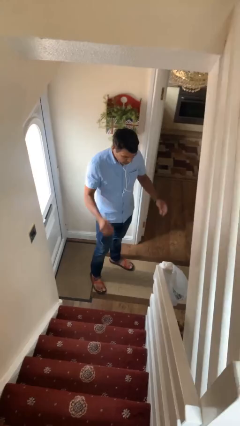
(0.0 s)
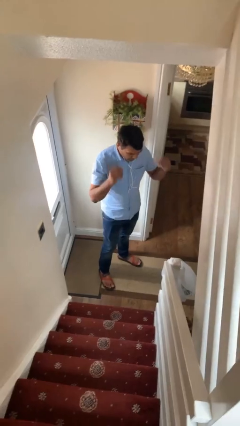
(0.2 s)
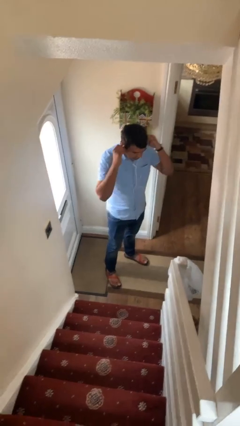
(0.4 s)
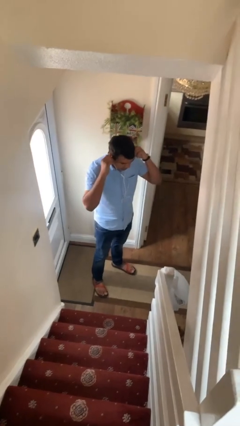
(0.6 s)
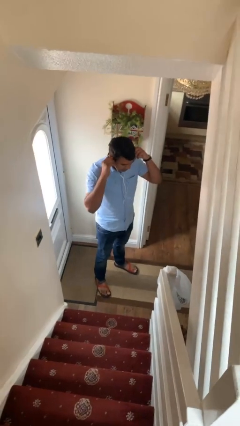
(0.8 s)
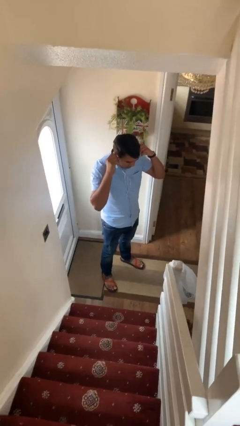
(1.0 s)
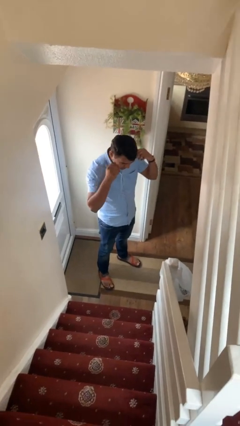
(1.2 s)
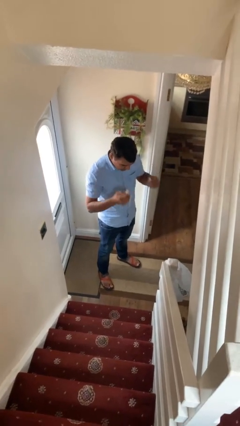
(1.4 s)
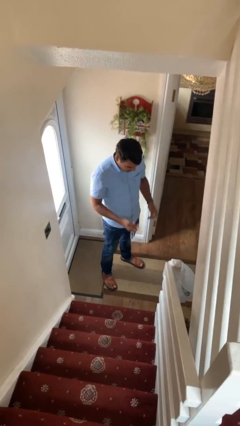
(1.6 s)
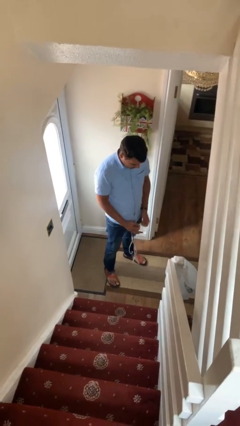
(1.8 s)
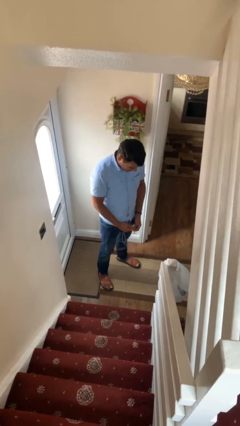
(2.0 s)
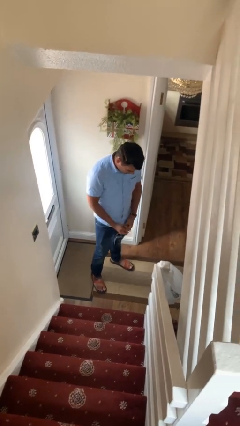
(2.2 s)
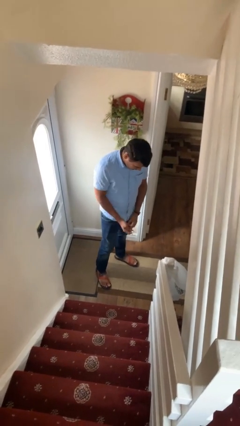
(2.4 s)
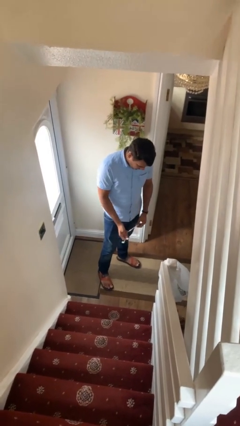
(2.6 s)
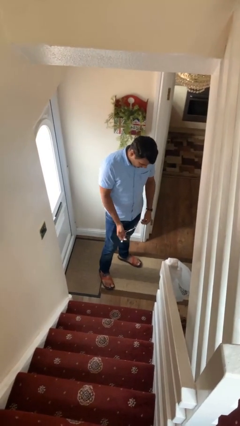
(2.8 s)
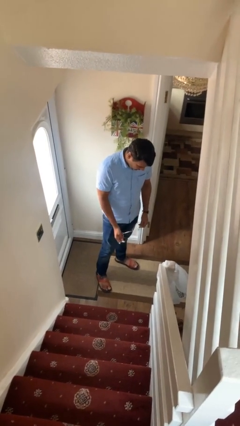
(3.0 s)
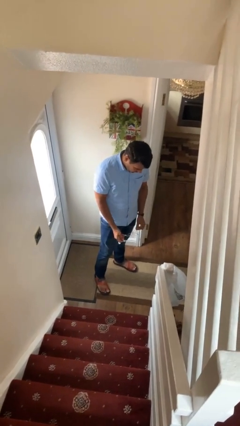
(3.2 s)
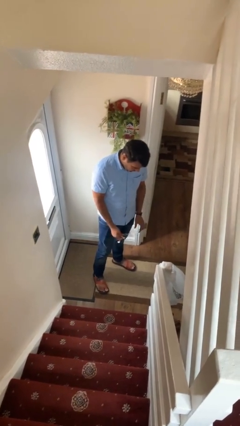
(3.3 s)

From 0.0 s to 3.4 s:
person takes off headphones

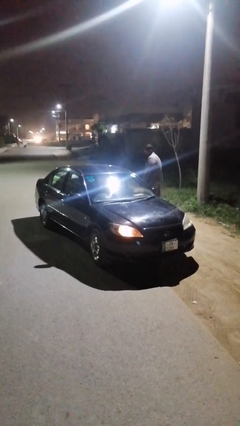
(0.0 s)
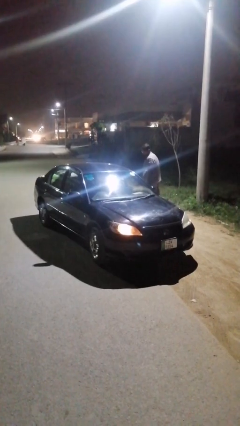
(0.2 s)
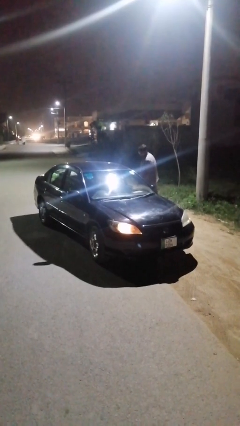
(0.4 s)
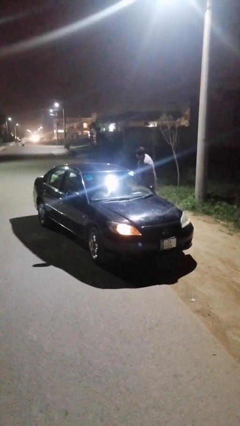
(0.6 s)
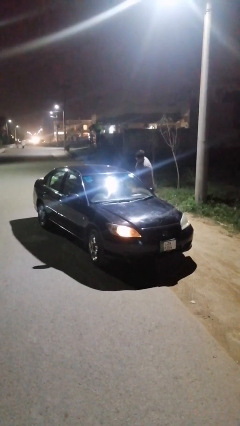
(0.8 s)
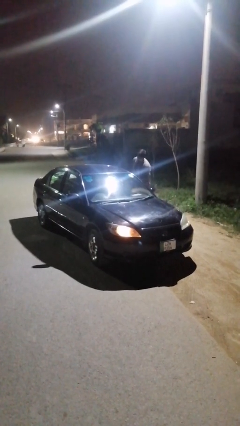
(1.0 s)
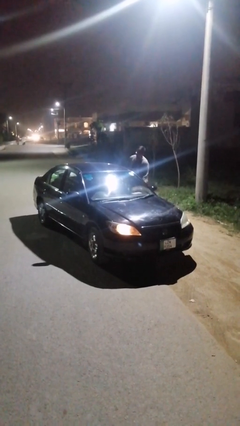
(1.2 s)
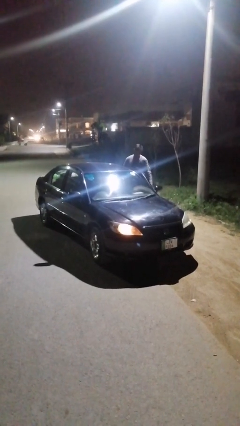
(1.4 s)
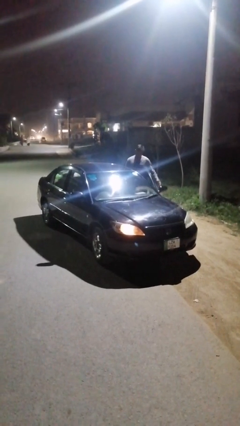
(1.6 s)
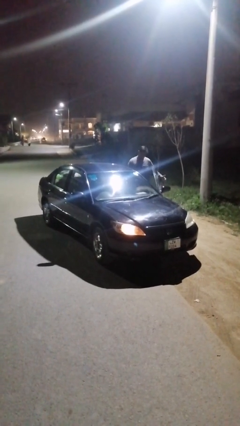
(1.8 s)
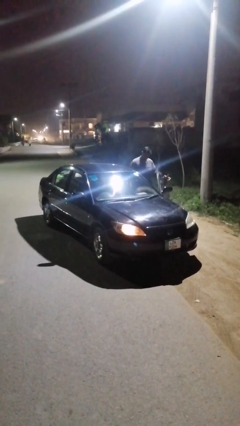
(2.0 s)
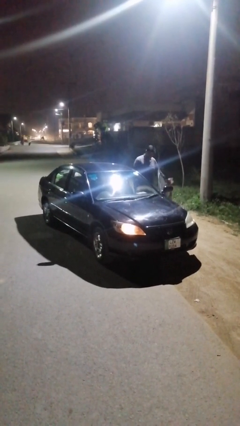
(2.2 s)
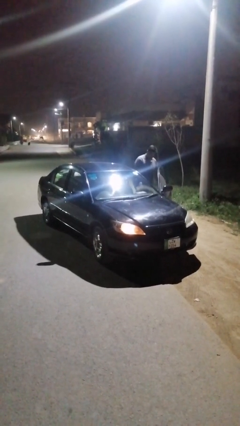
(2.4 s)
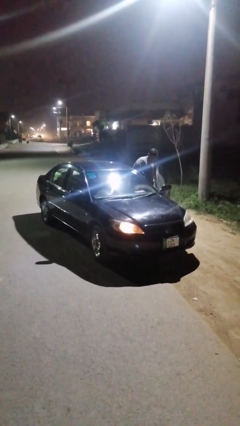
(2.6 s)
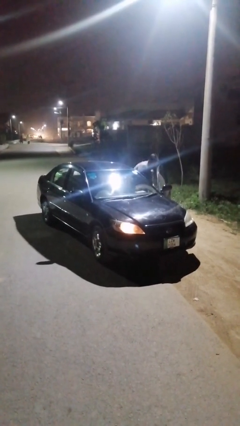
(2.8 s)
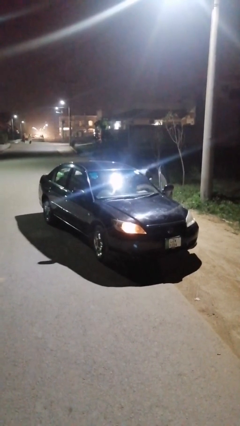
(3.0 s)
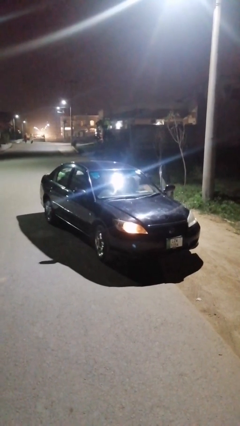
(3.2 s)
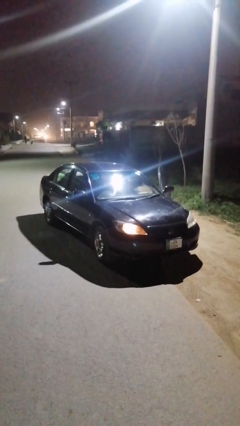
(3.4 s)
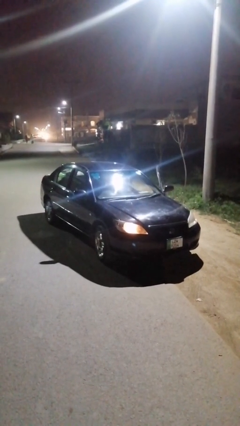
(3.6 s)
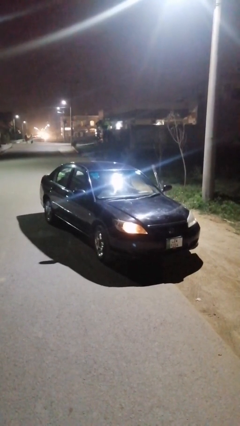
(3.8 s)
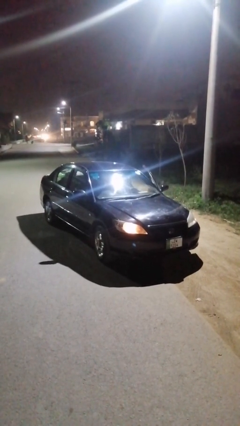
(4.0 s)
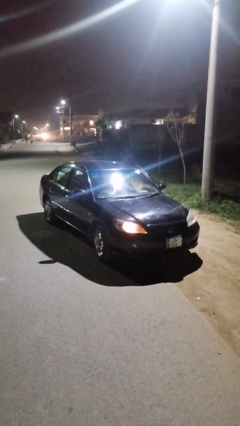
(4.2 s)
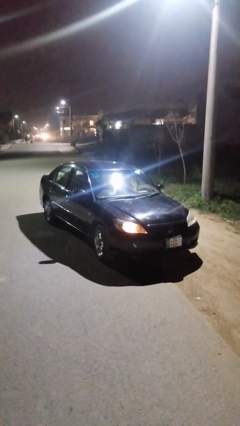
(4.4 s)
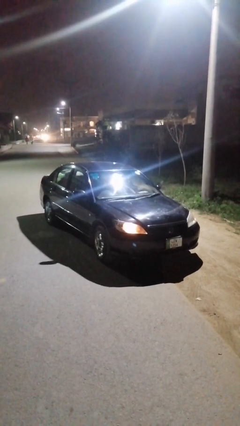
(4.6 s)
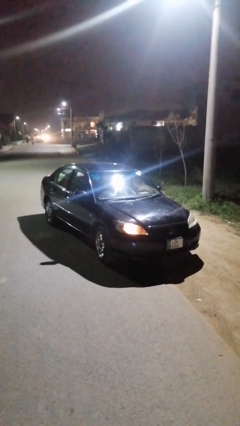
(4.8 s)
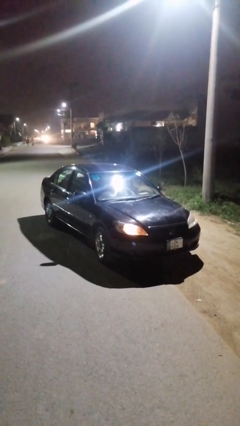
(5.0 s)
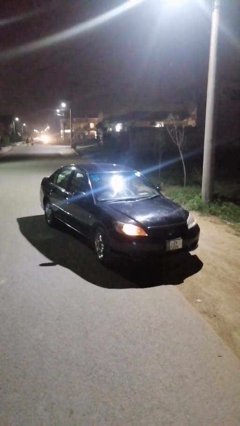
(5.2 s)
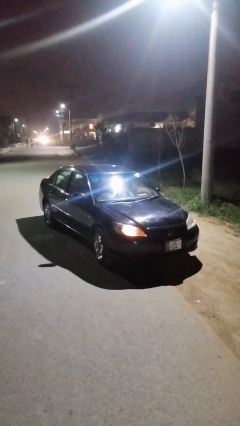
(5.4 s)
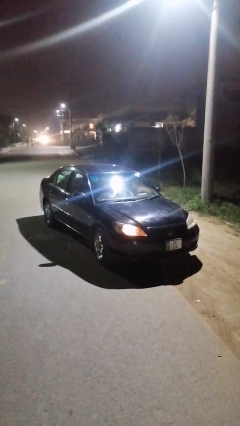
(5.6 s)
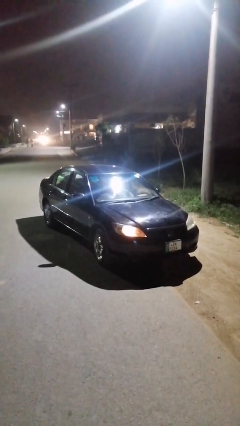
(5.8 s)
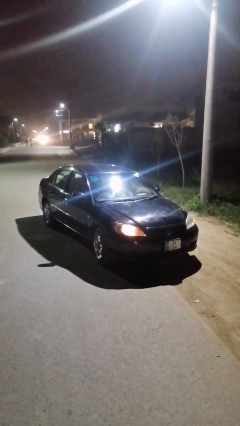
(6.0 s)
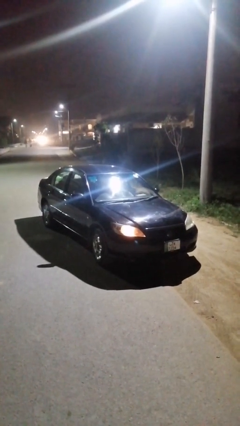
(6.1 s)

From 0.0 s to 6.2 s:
car picks up person

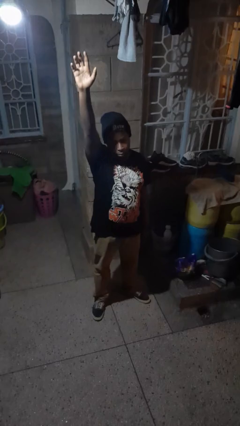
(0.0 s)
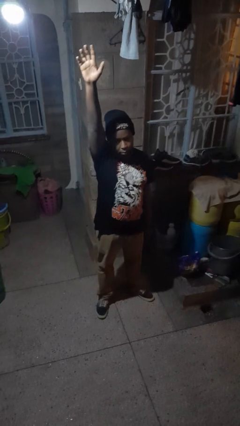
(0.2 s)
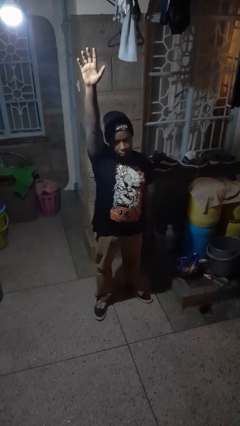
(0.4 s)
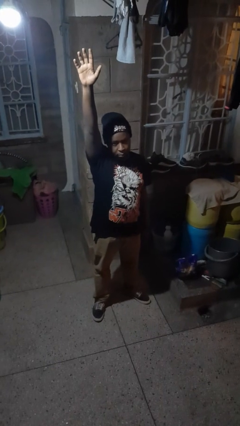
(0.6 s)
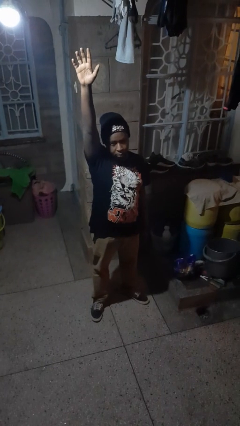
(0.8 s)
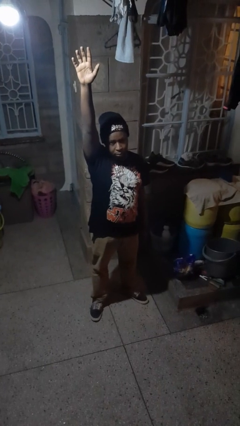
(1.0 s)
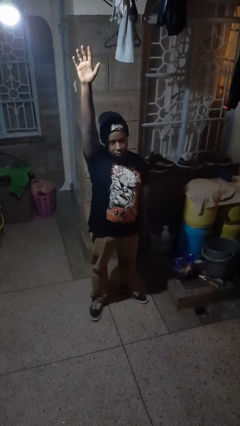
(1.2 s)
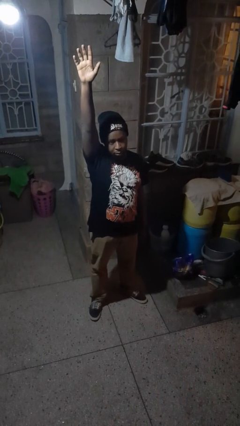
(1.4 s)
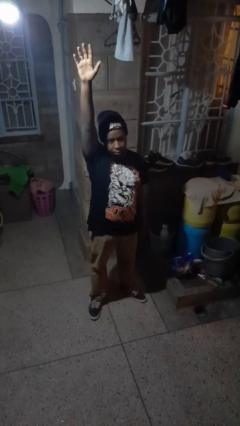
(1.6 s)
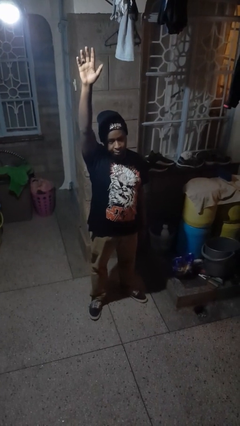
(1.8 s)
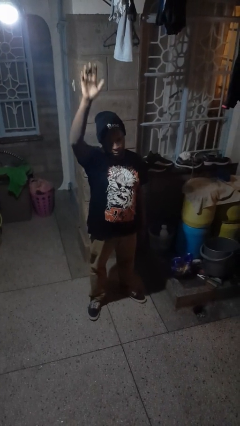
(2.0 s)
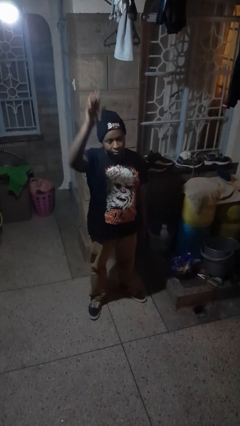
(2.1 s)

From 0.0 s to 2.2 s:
person gestures raise hand

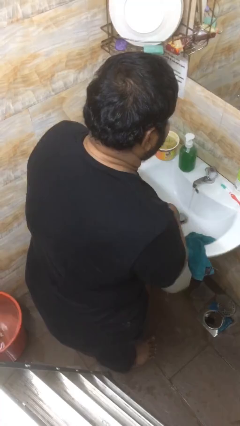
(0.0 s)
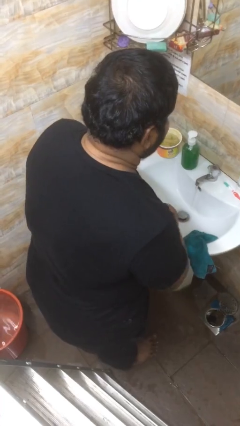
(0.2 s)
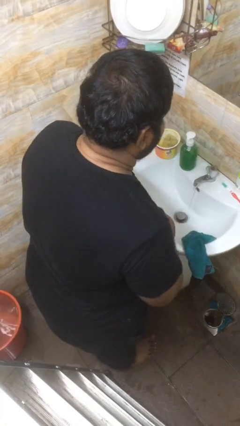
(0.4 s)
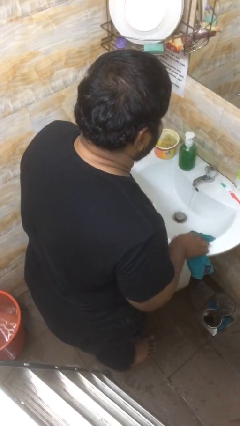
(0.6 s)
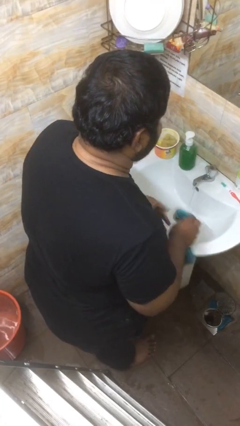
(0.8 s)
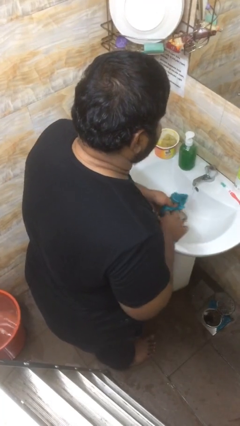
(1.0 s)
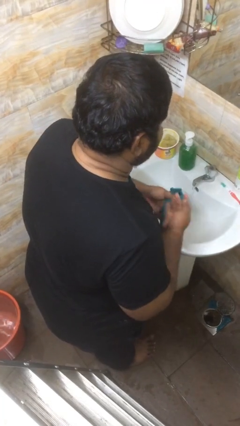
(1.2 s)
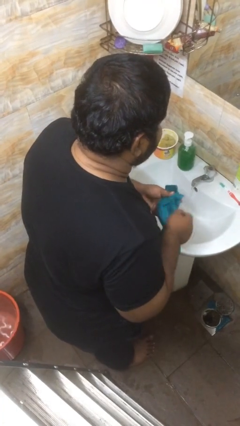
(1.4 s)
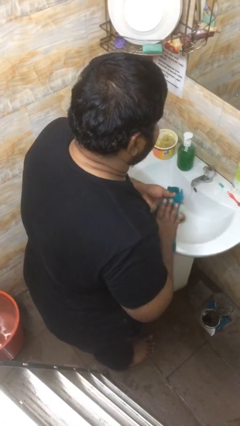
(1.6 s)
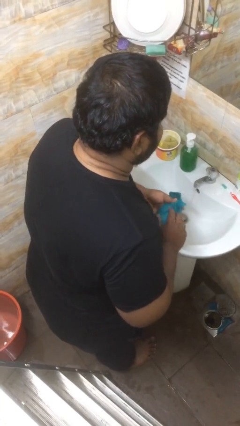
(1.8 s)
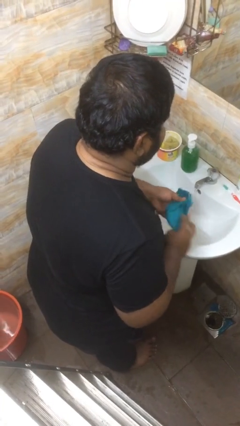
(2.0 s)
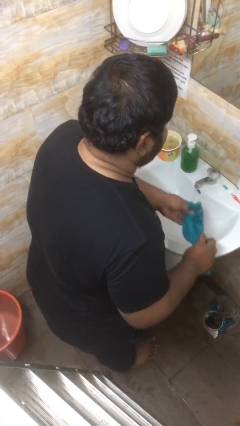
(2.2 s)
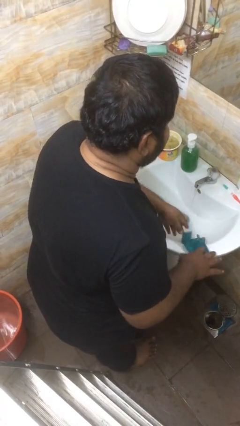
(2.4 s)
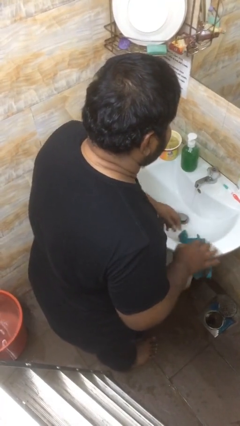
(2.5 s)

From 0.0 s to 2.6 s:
person dries hands with towel

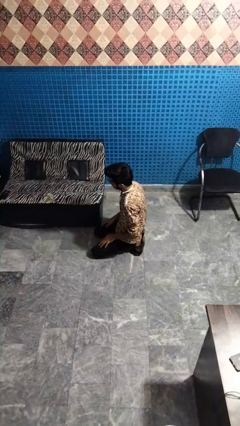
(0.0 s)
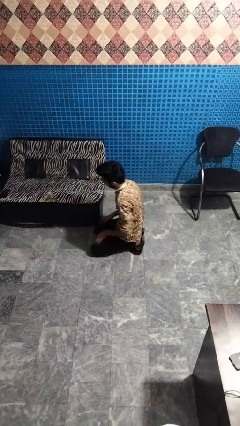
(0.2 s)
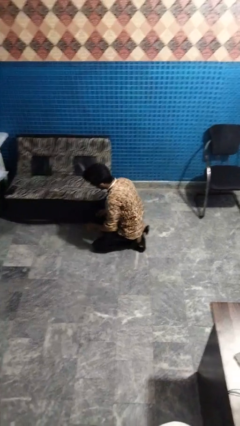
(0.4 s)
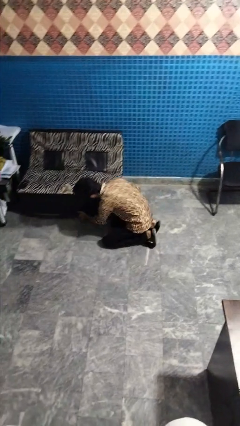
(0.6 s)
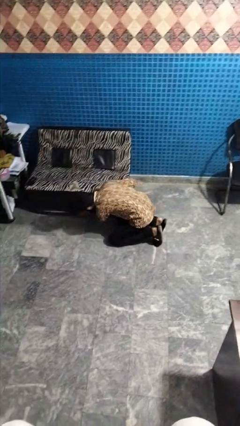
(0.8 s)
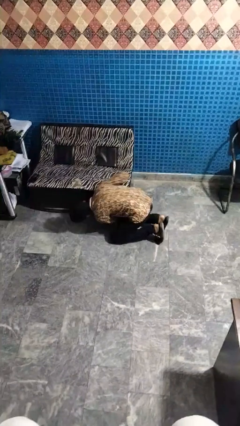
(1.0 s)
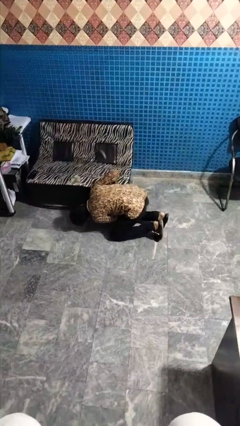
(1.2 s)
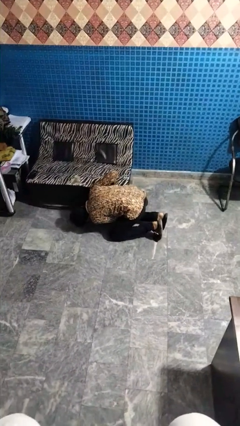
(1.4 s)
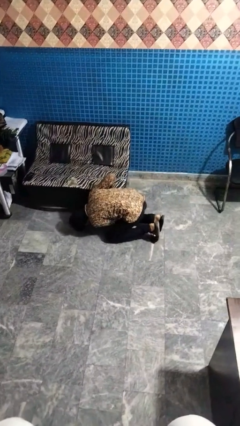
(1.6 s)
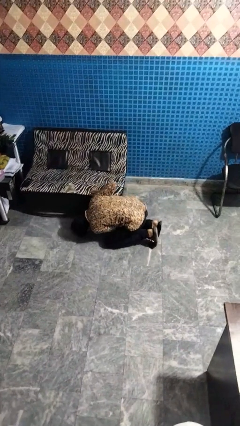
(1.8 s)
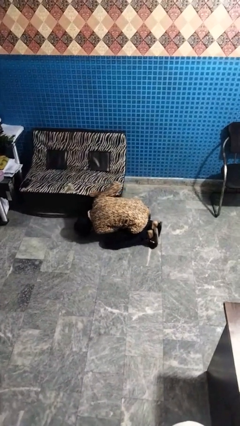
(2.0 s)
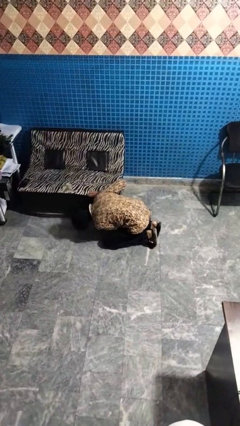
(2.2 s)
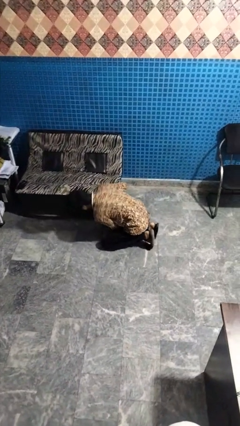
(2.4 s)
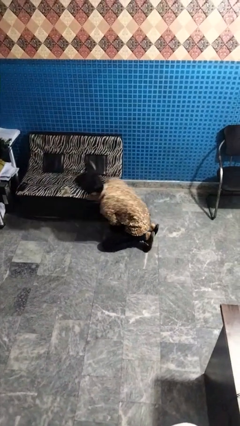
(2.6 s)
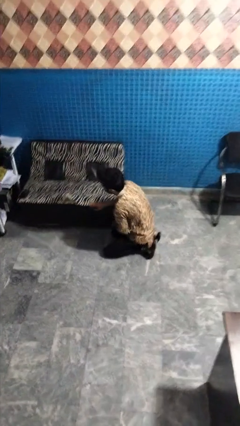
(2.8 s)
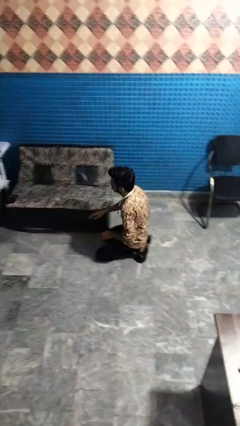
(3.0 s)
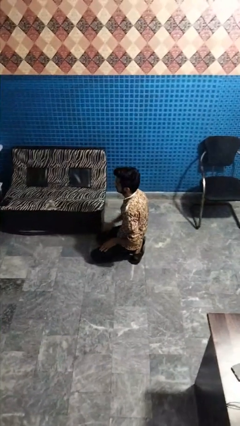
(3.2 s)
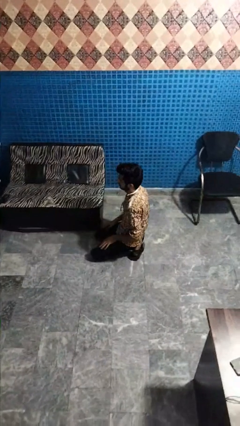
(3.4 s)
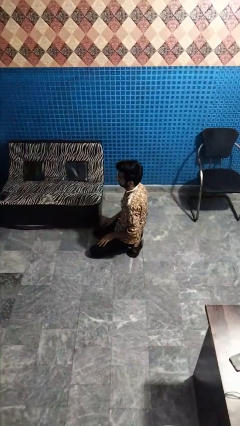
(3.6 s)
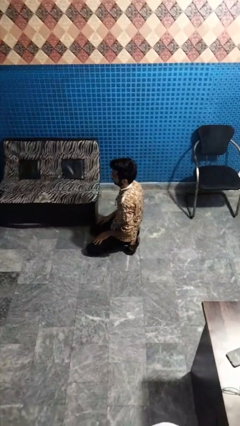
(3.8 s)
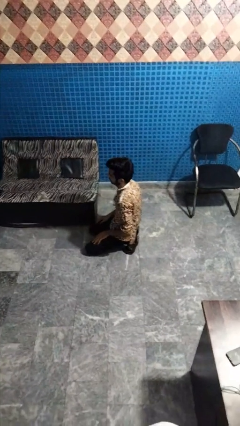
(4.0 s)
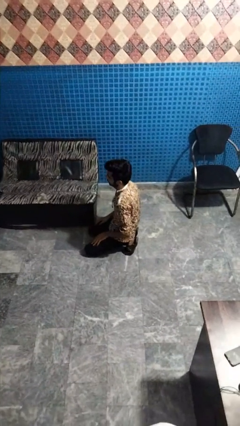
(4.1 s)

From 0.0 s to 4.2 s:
person searches under couch
